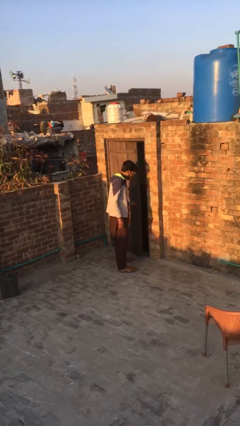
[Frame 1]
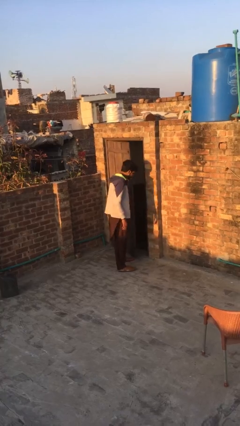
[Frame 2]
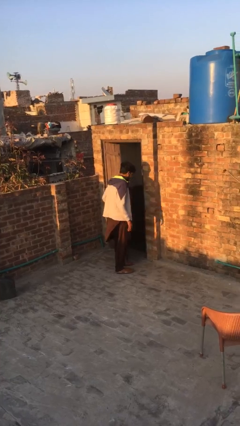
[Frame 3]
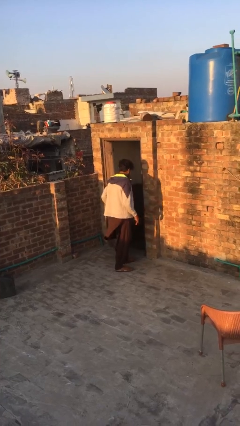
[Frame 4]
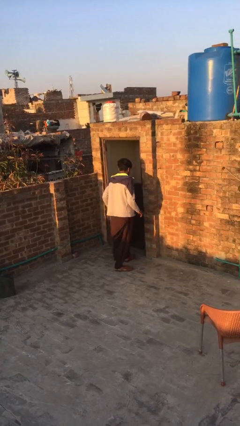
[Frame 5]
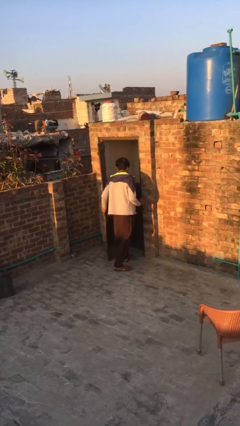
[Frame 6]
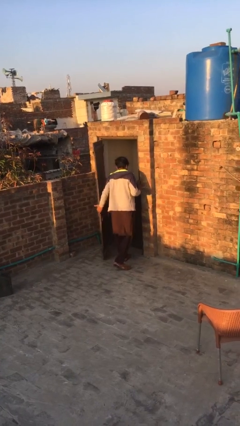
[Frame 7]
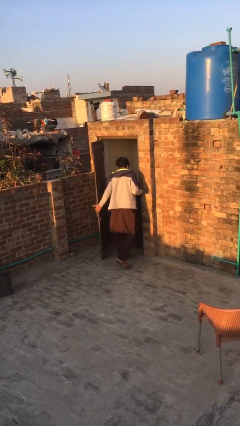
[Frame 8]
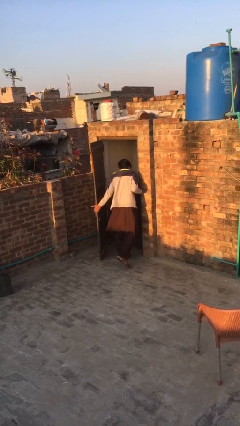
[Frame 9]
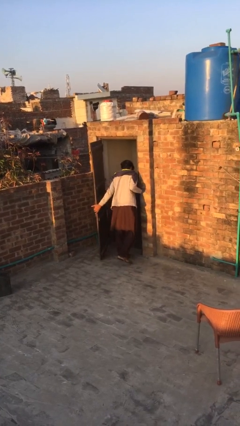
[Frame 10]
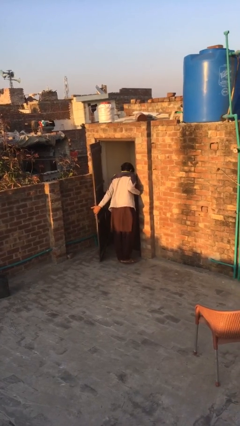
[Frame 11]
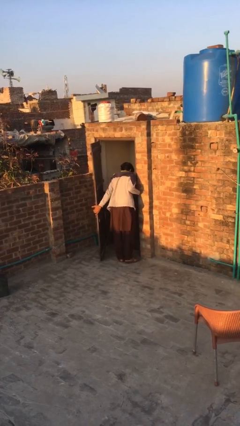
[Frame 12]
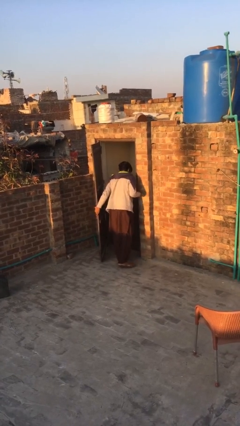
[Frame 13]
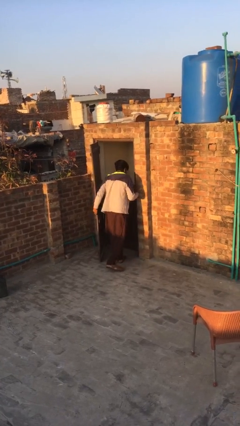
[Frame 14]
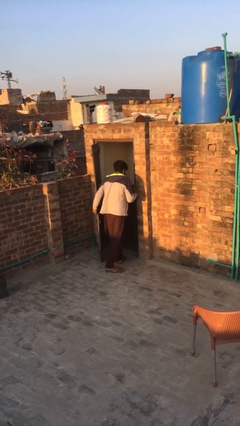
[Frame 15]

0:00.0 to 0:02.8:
person opens facility door

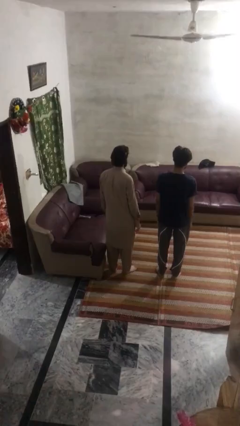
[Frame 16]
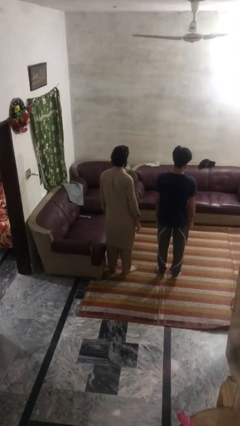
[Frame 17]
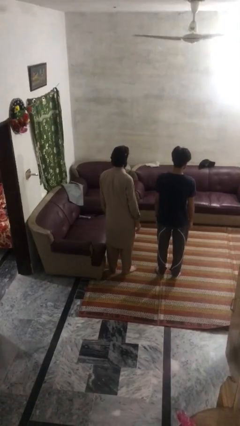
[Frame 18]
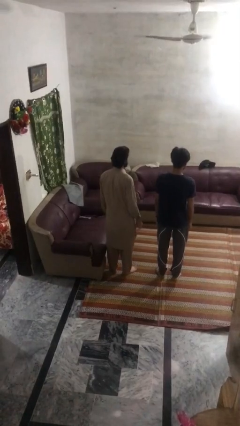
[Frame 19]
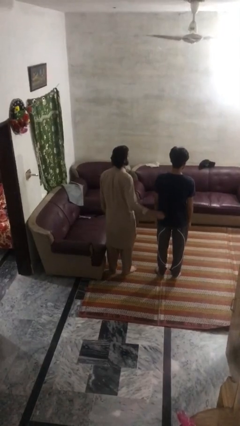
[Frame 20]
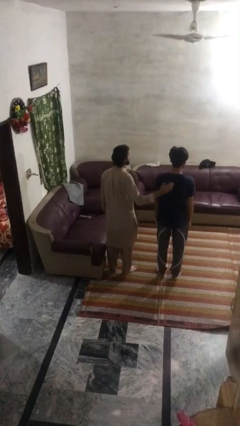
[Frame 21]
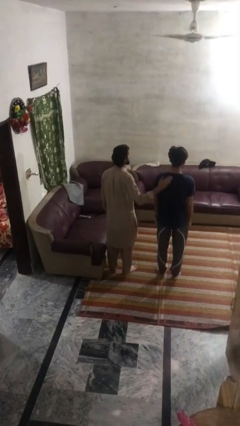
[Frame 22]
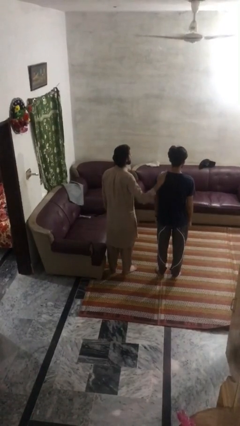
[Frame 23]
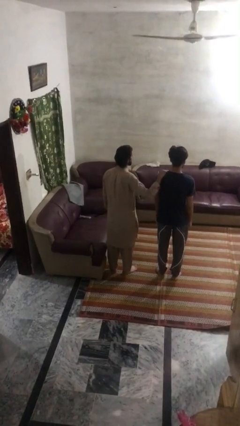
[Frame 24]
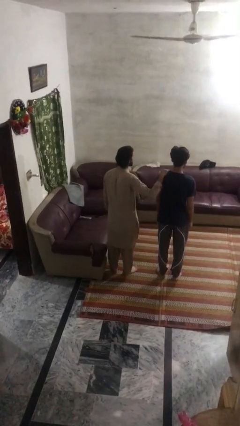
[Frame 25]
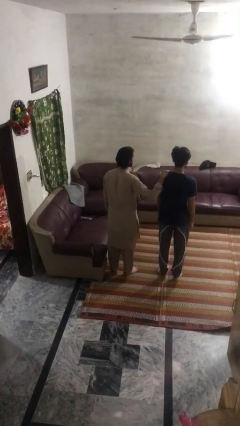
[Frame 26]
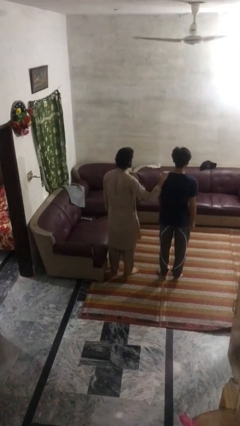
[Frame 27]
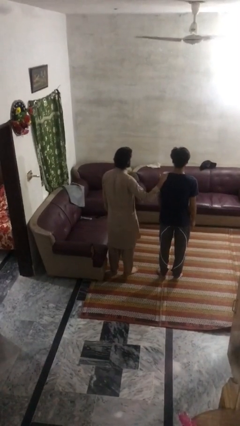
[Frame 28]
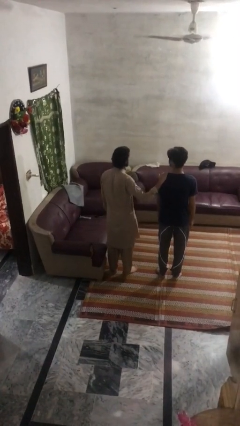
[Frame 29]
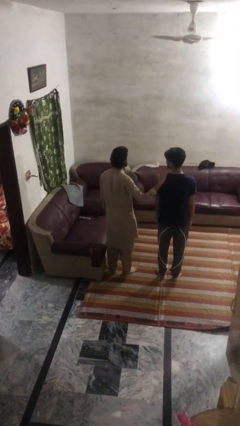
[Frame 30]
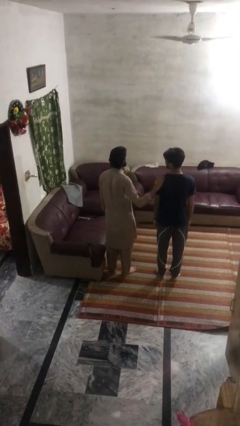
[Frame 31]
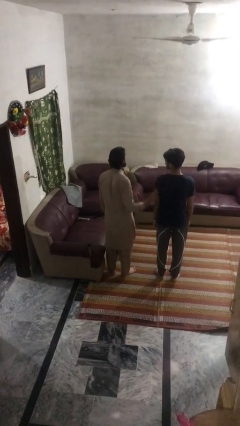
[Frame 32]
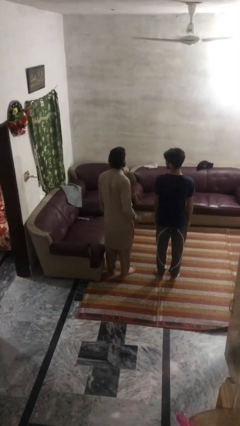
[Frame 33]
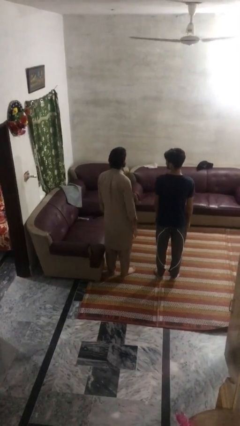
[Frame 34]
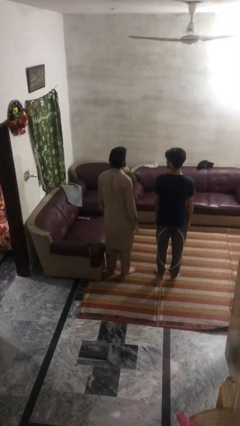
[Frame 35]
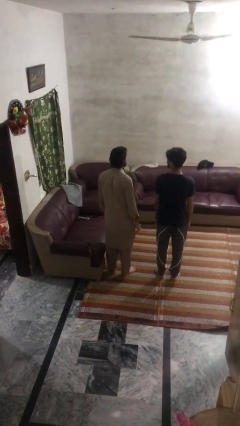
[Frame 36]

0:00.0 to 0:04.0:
person pounds shoulders of person

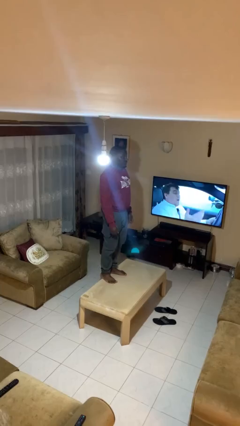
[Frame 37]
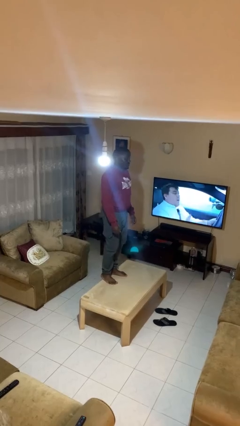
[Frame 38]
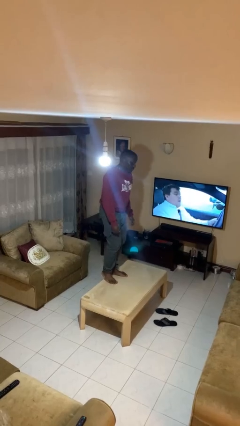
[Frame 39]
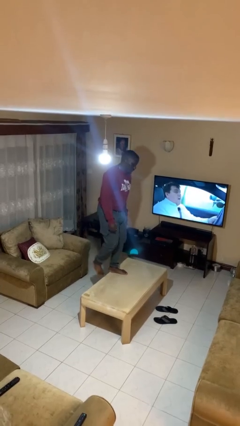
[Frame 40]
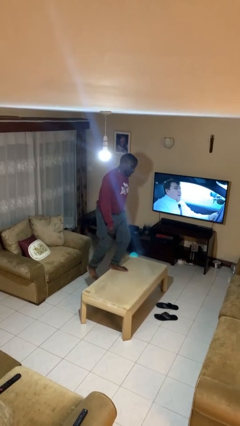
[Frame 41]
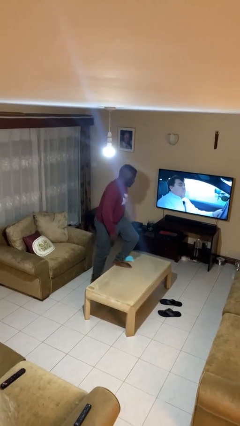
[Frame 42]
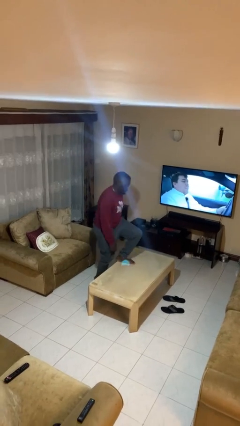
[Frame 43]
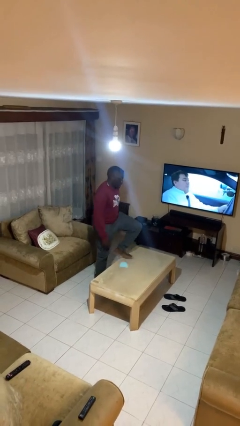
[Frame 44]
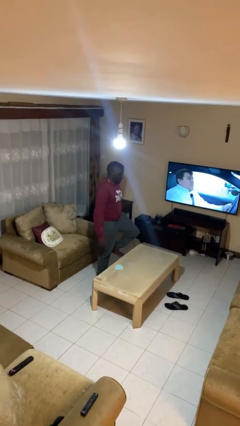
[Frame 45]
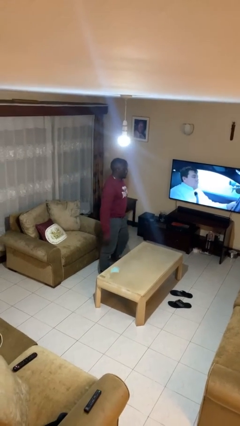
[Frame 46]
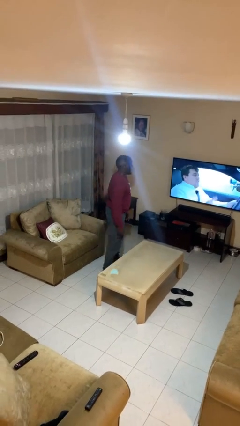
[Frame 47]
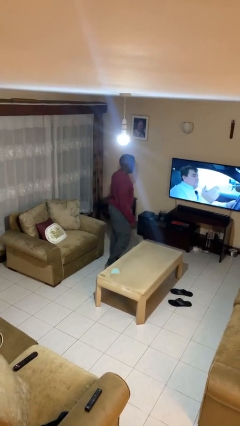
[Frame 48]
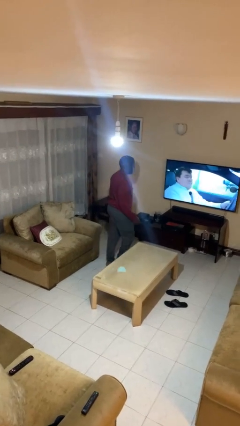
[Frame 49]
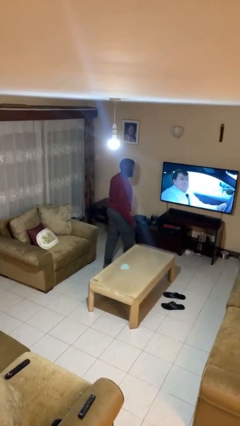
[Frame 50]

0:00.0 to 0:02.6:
person climbs off table

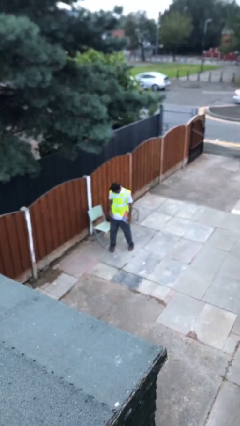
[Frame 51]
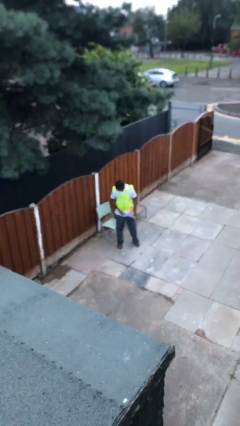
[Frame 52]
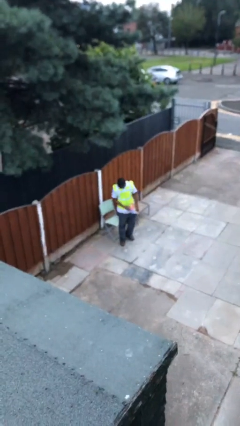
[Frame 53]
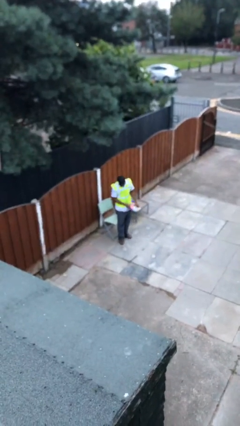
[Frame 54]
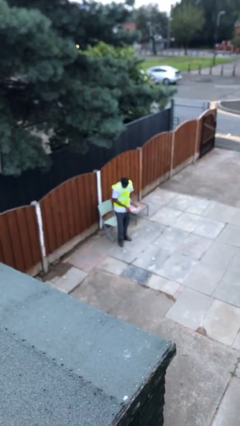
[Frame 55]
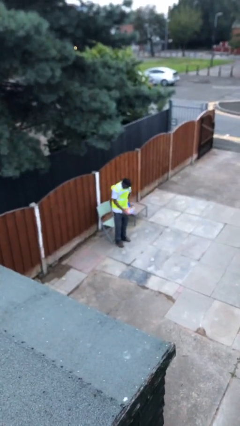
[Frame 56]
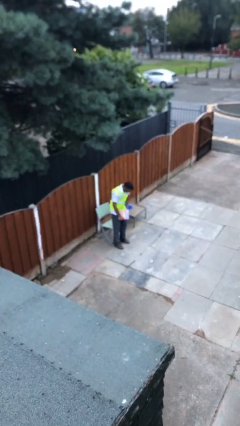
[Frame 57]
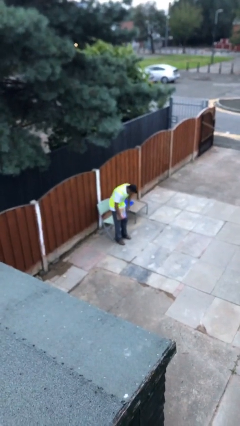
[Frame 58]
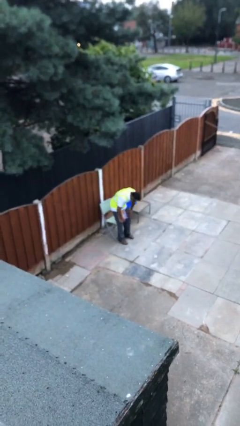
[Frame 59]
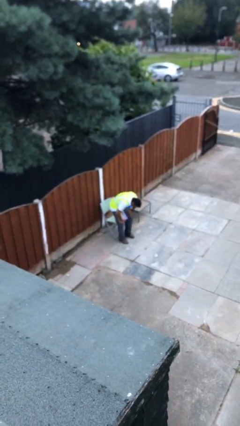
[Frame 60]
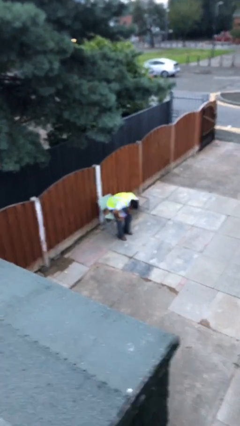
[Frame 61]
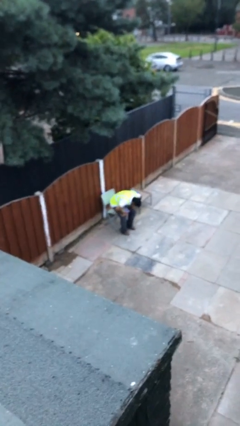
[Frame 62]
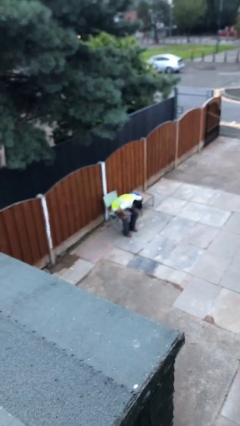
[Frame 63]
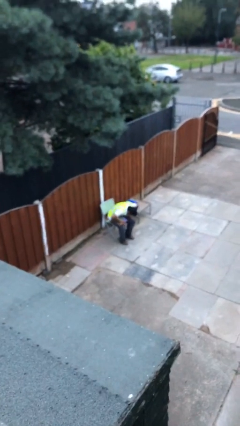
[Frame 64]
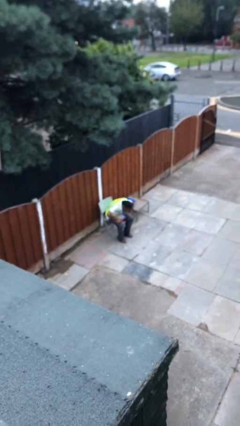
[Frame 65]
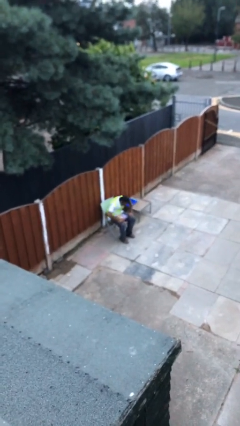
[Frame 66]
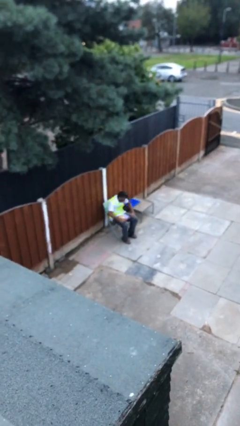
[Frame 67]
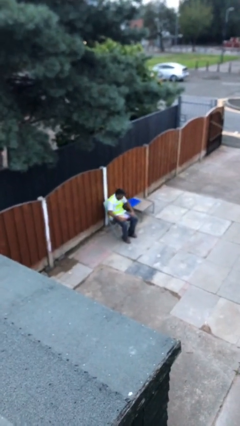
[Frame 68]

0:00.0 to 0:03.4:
person sits down

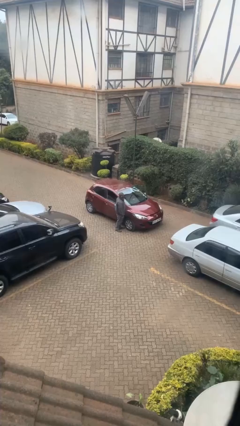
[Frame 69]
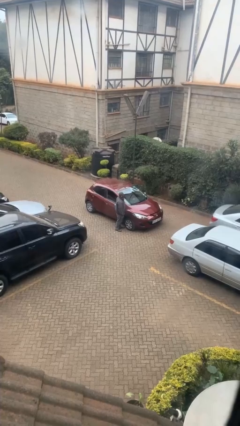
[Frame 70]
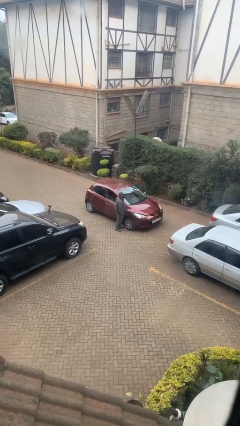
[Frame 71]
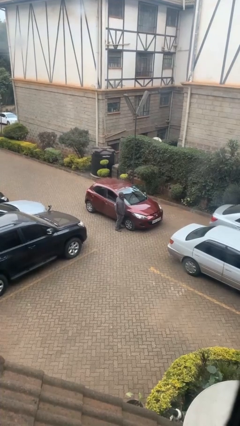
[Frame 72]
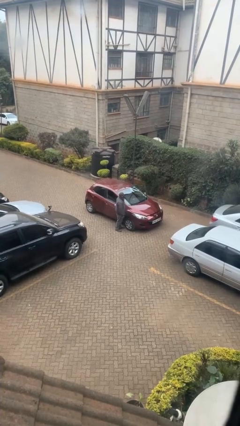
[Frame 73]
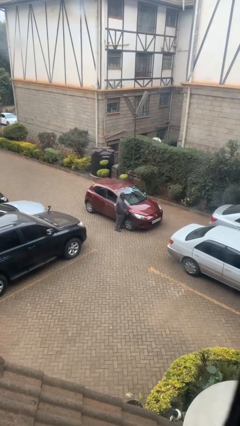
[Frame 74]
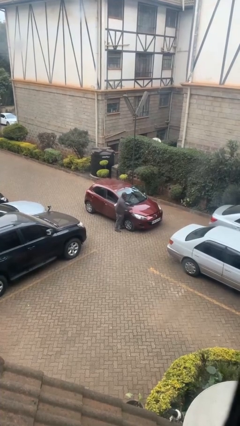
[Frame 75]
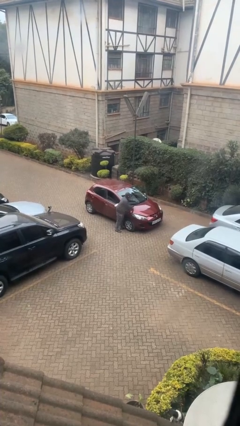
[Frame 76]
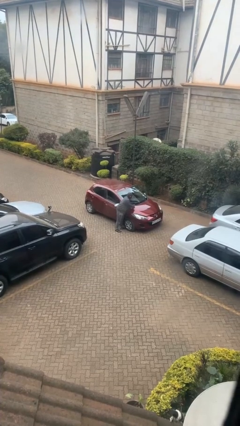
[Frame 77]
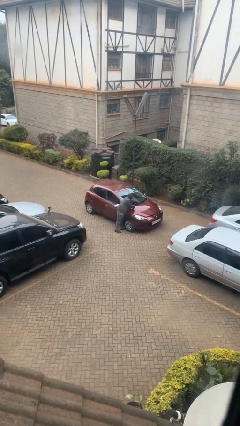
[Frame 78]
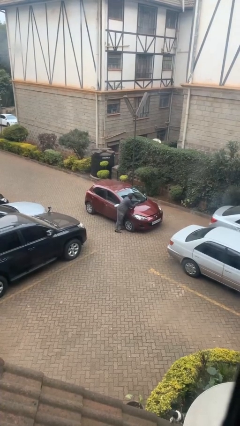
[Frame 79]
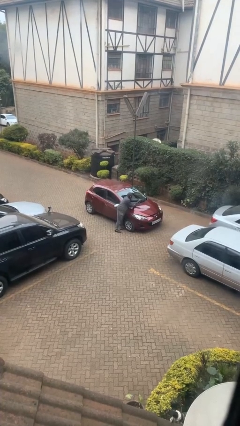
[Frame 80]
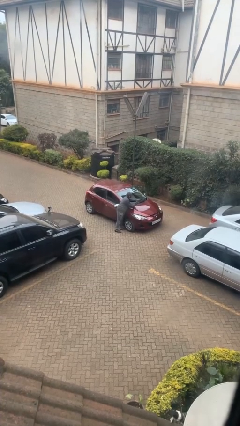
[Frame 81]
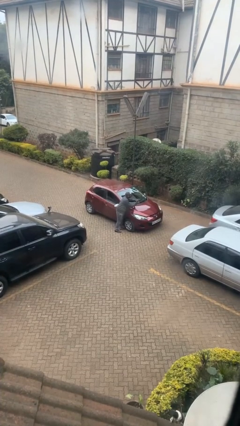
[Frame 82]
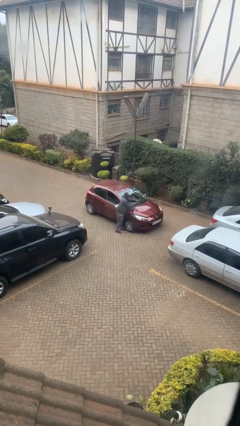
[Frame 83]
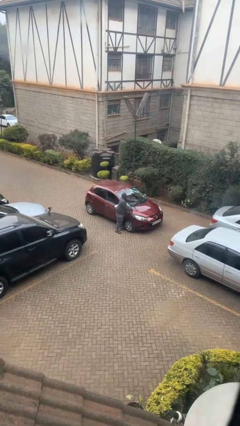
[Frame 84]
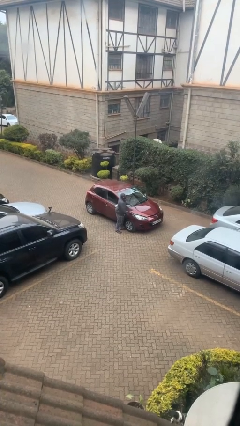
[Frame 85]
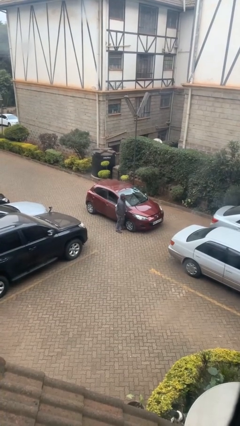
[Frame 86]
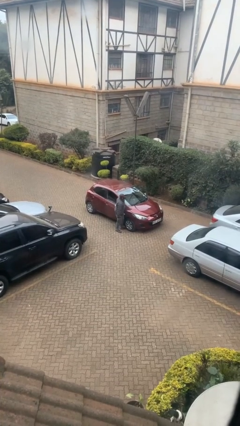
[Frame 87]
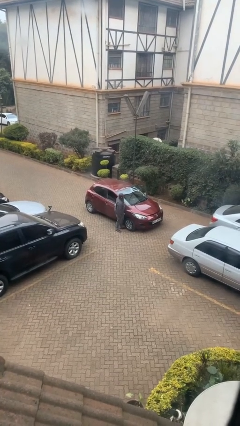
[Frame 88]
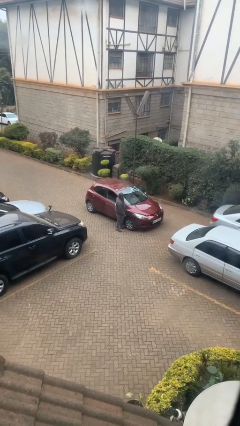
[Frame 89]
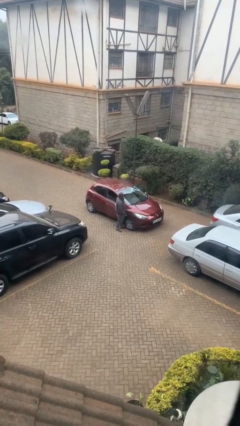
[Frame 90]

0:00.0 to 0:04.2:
person flips up car wipers

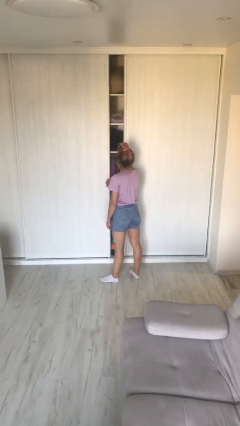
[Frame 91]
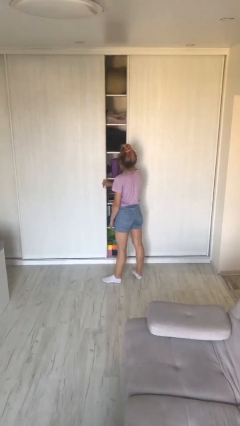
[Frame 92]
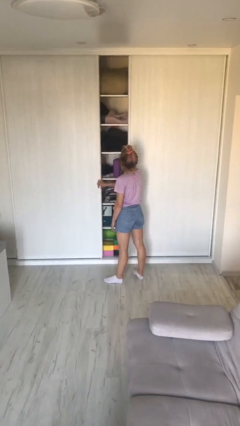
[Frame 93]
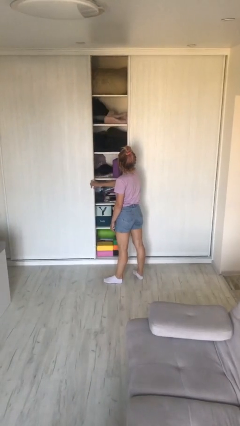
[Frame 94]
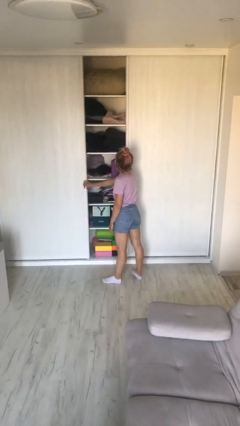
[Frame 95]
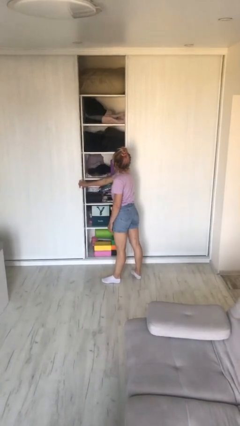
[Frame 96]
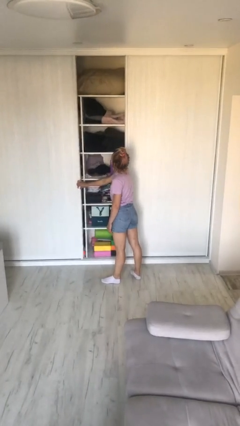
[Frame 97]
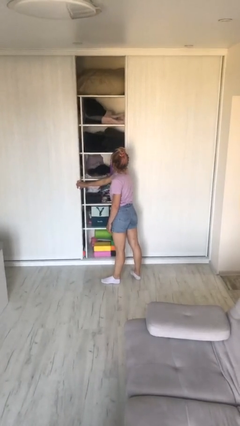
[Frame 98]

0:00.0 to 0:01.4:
person opens sliding door
